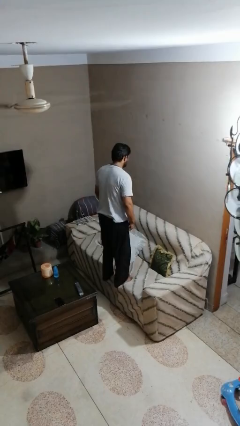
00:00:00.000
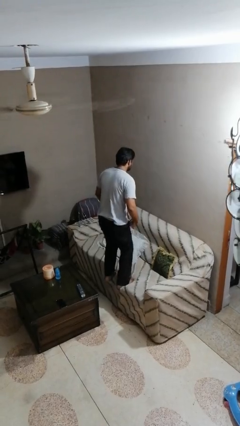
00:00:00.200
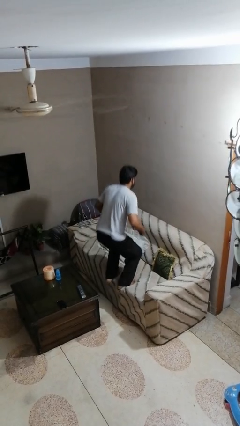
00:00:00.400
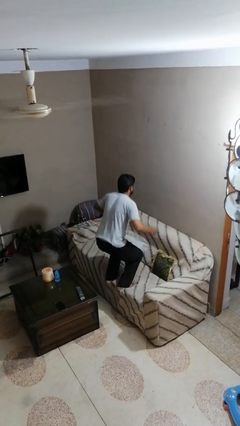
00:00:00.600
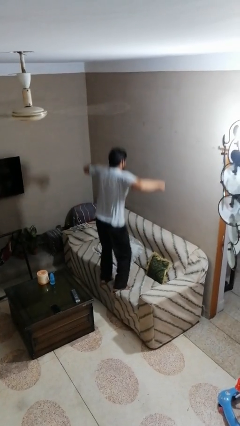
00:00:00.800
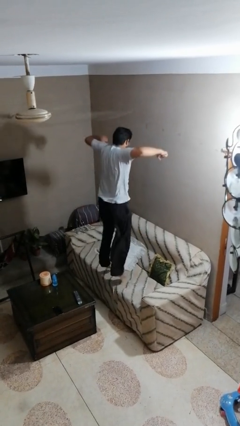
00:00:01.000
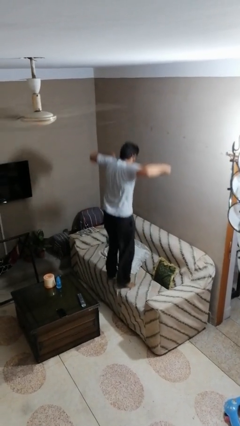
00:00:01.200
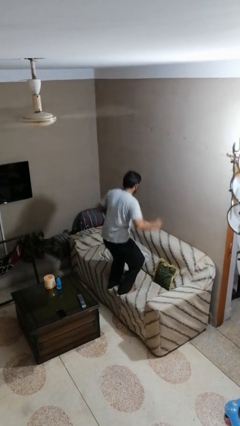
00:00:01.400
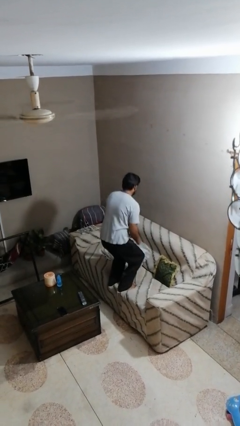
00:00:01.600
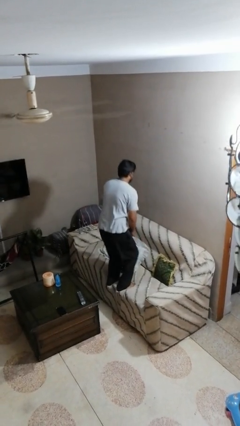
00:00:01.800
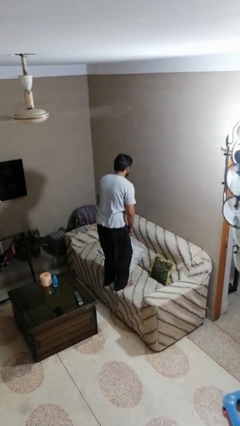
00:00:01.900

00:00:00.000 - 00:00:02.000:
person jumps on couch

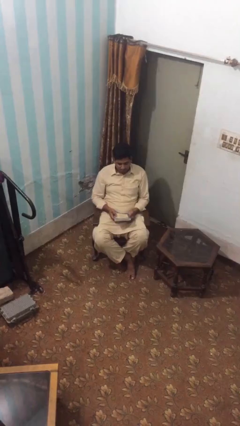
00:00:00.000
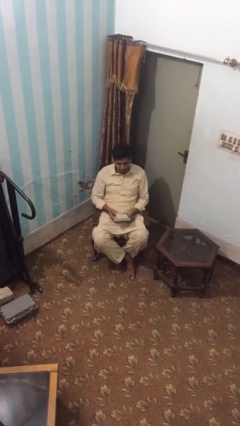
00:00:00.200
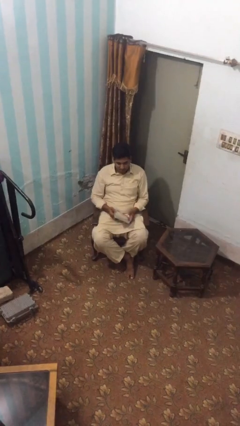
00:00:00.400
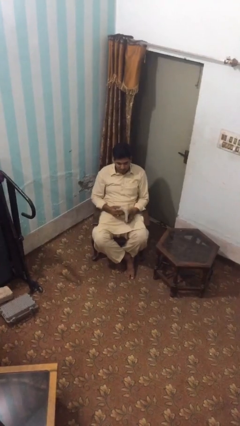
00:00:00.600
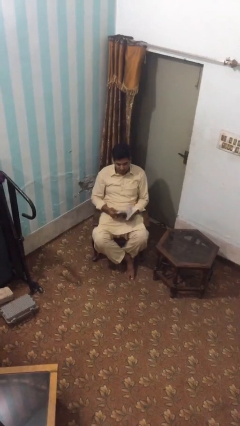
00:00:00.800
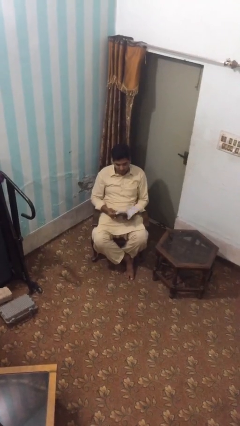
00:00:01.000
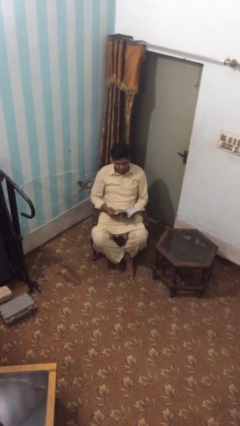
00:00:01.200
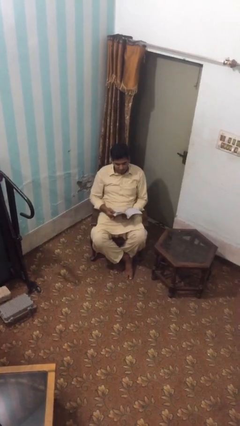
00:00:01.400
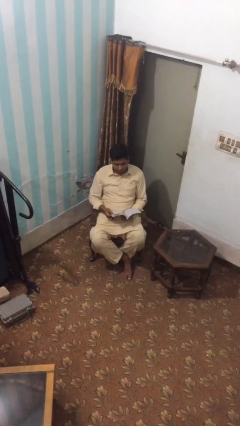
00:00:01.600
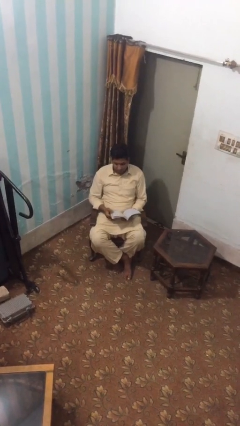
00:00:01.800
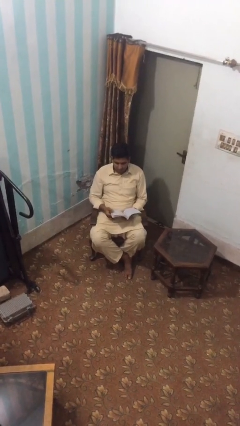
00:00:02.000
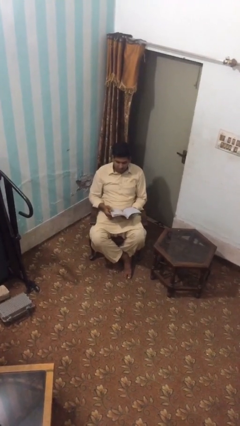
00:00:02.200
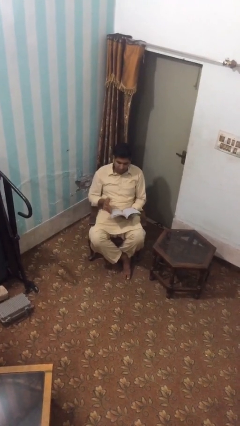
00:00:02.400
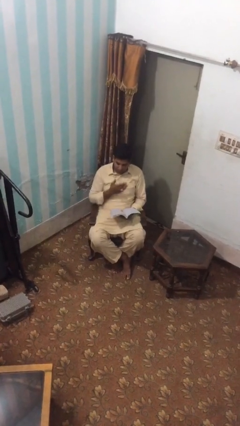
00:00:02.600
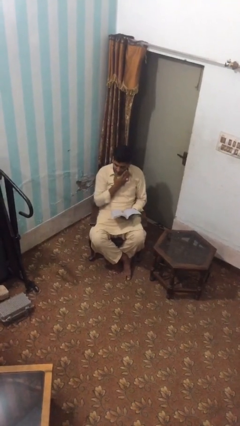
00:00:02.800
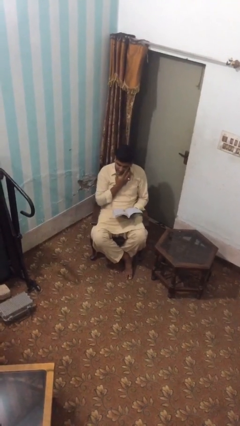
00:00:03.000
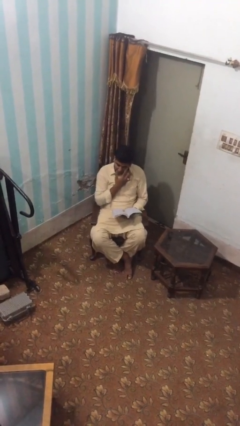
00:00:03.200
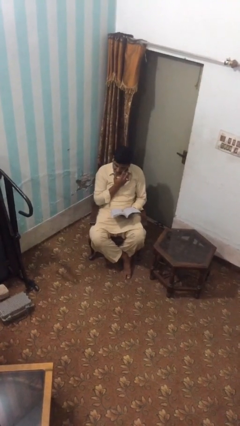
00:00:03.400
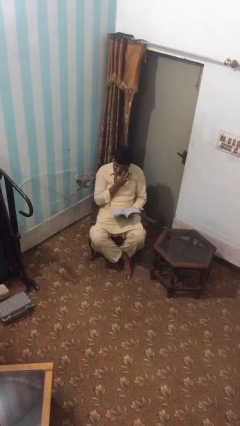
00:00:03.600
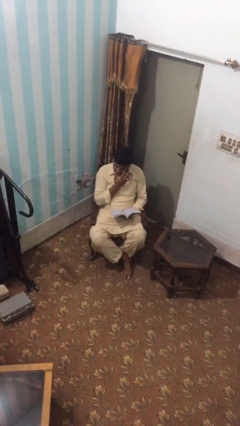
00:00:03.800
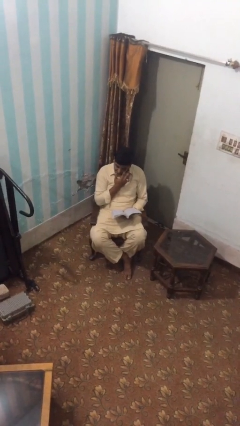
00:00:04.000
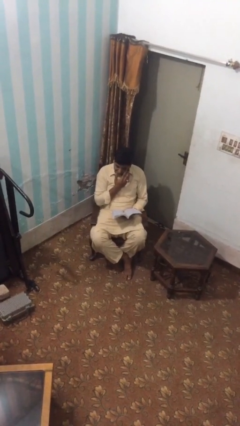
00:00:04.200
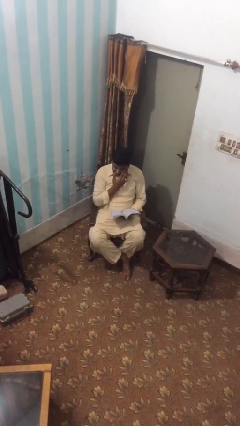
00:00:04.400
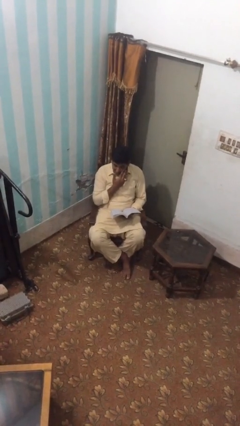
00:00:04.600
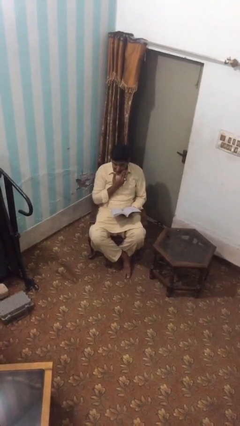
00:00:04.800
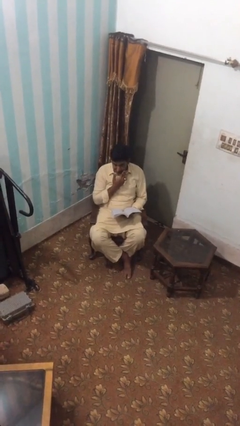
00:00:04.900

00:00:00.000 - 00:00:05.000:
person reads document

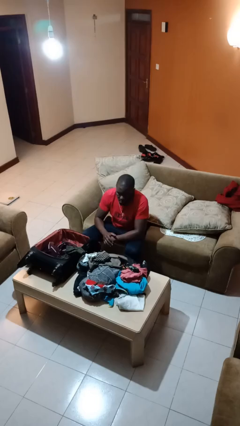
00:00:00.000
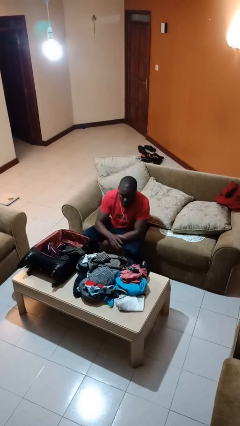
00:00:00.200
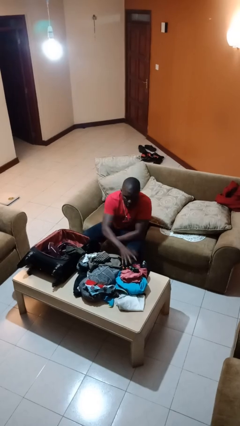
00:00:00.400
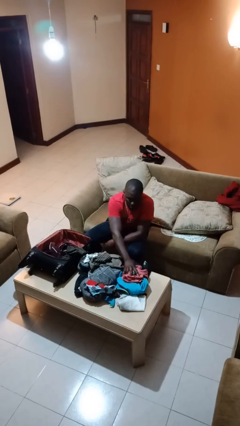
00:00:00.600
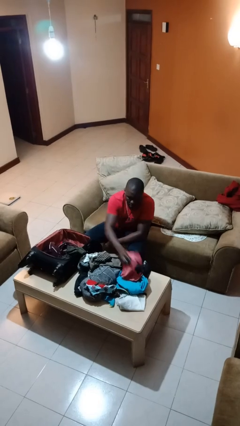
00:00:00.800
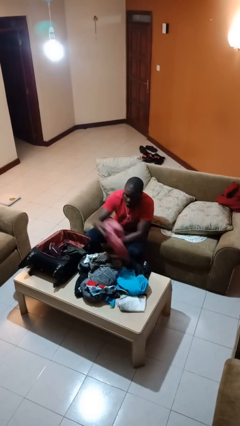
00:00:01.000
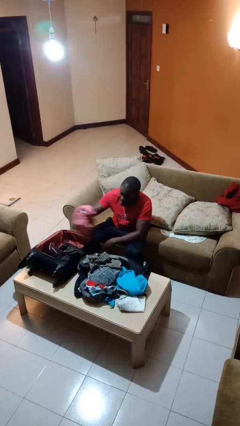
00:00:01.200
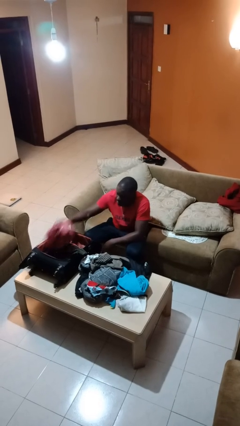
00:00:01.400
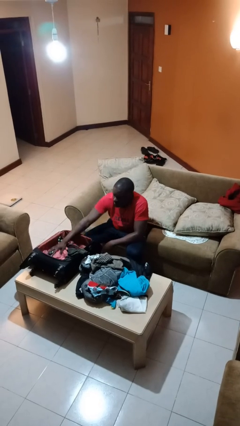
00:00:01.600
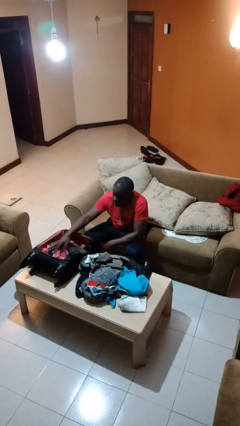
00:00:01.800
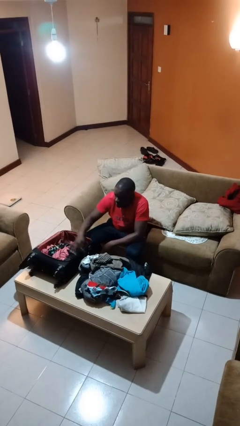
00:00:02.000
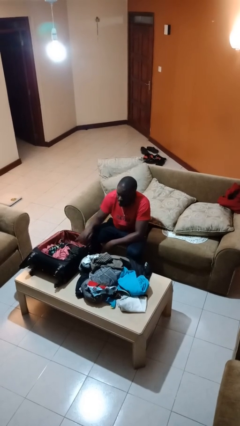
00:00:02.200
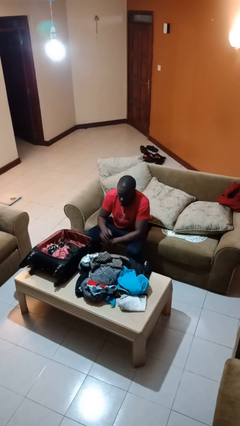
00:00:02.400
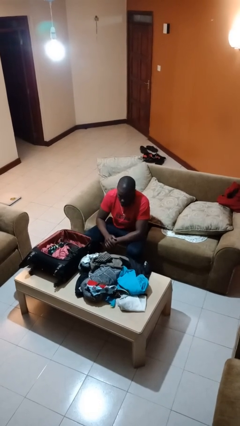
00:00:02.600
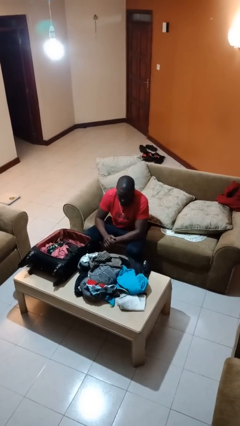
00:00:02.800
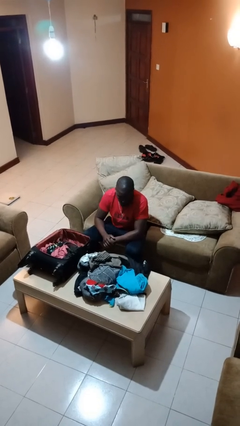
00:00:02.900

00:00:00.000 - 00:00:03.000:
person loads clothes into suitcase

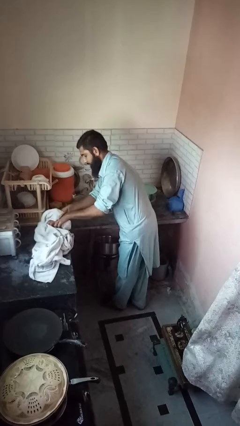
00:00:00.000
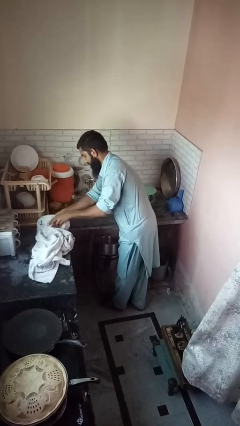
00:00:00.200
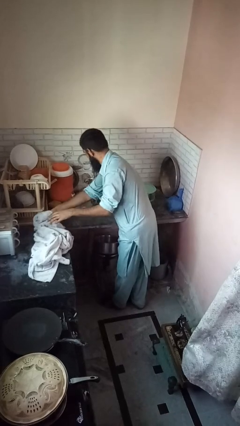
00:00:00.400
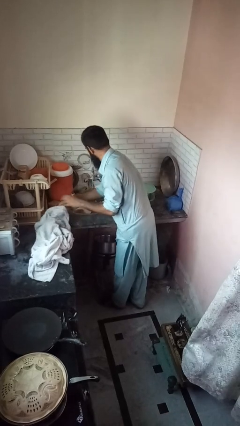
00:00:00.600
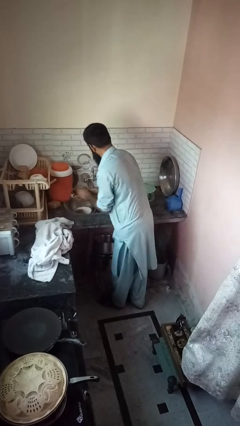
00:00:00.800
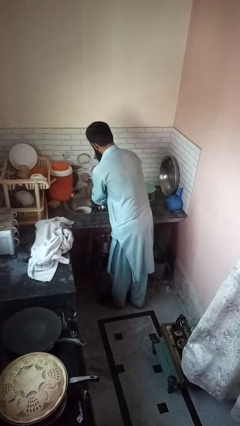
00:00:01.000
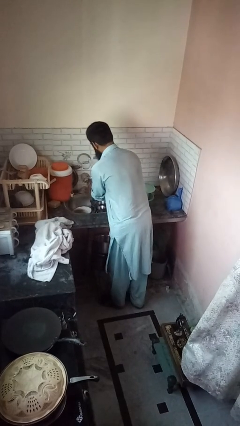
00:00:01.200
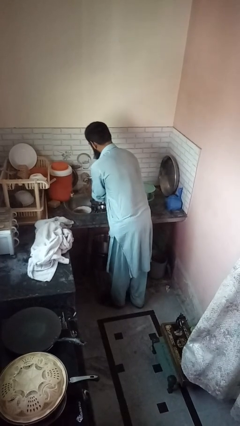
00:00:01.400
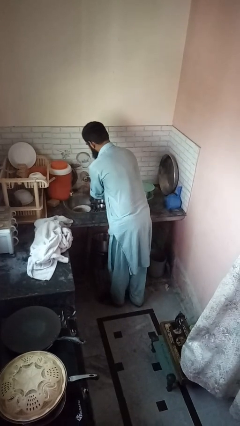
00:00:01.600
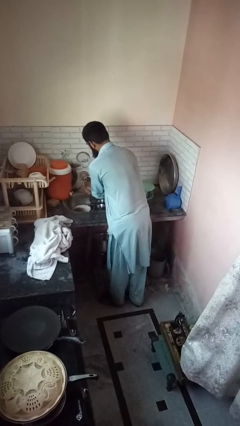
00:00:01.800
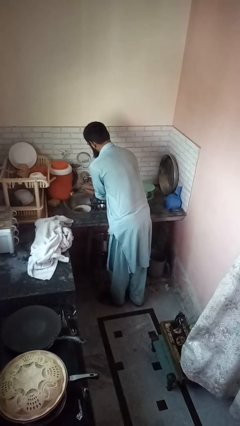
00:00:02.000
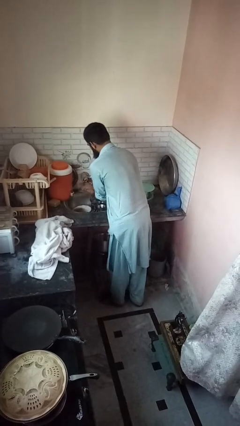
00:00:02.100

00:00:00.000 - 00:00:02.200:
person washes hands

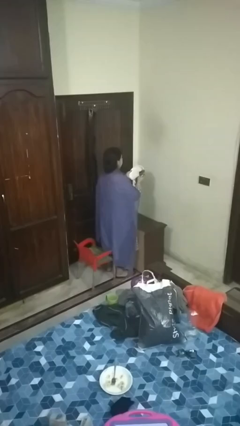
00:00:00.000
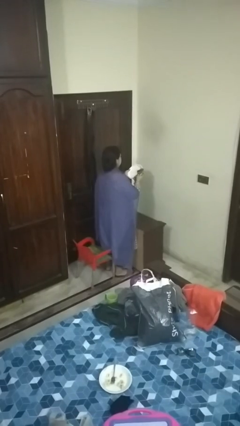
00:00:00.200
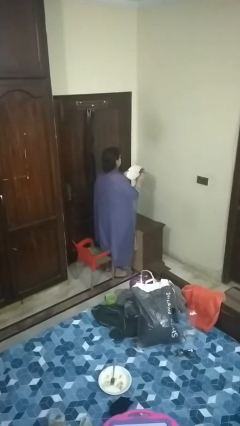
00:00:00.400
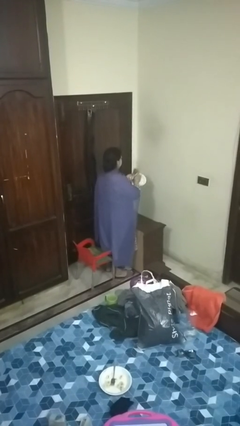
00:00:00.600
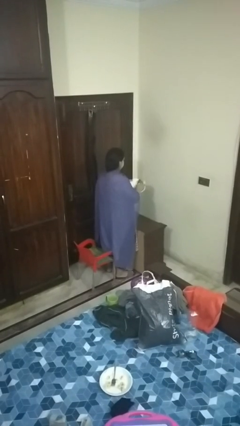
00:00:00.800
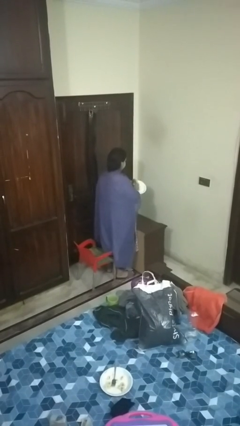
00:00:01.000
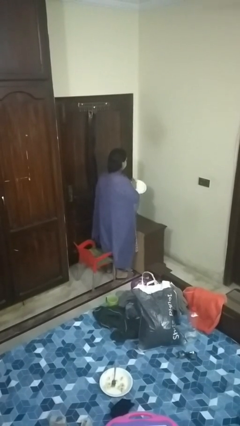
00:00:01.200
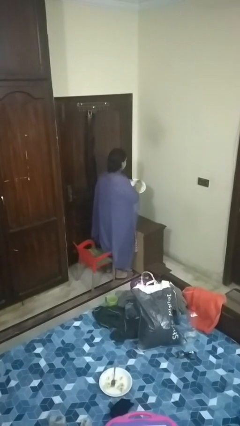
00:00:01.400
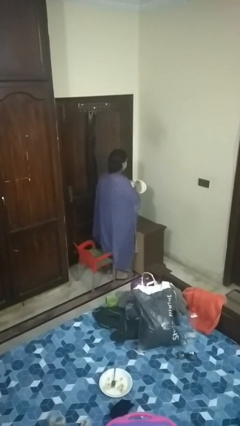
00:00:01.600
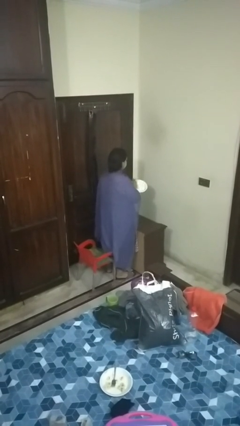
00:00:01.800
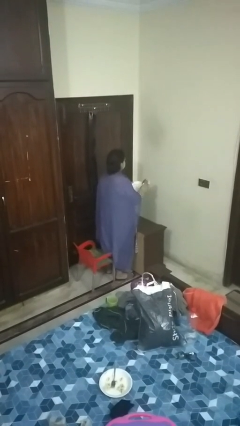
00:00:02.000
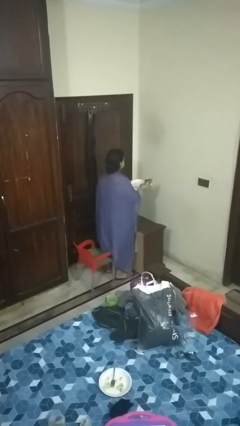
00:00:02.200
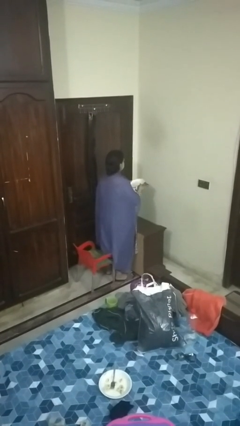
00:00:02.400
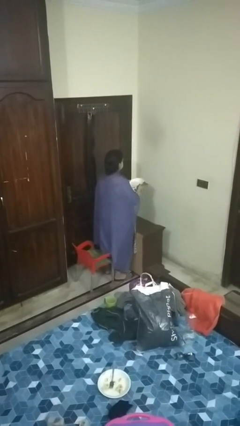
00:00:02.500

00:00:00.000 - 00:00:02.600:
person dries dish

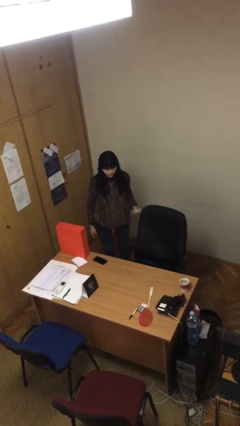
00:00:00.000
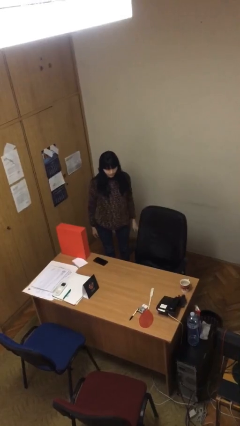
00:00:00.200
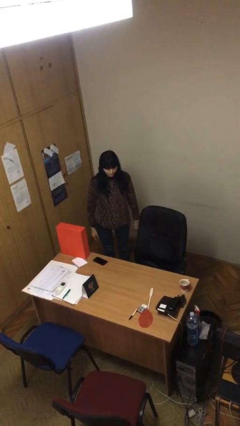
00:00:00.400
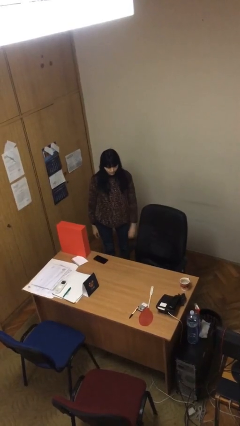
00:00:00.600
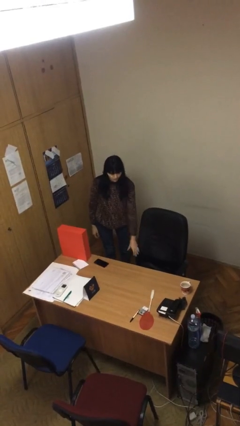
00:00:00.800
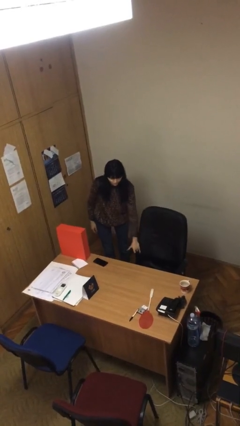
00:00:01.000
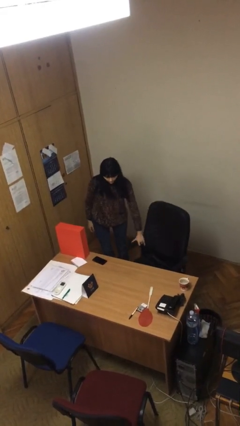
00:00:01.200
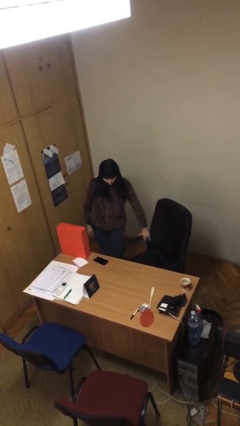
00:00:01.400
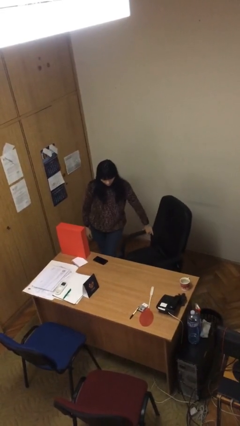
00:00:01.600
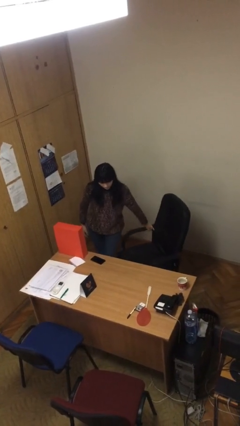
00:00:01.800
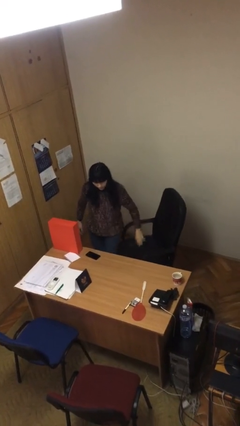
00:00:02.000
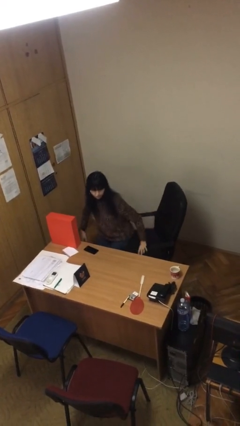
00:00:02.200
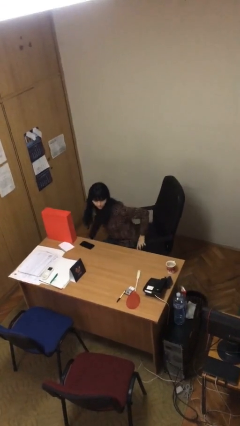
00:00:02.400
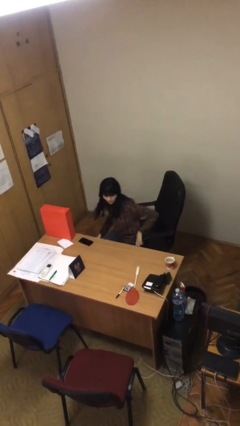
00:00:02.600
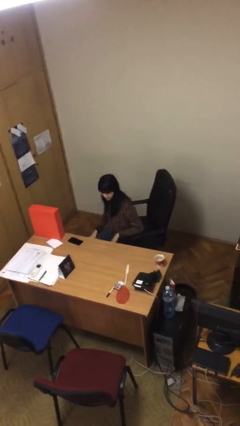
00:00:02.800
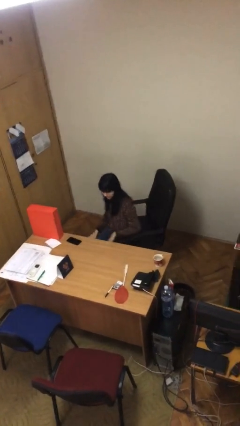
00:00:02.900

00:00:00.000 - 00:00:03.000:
person sits down
